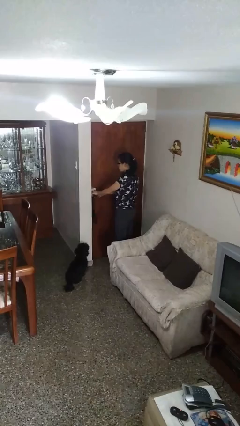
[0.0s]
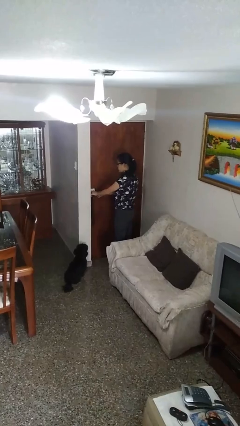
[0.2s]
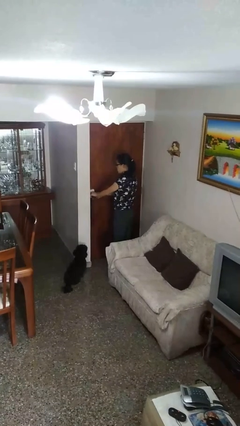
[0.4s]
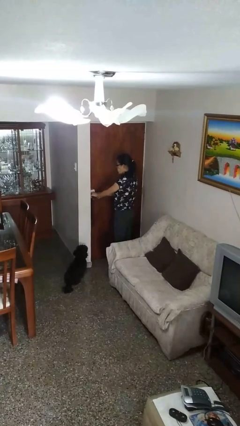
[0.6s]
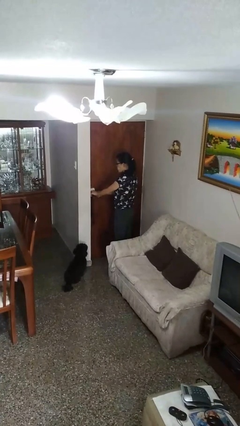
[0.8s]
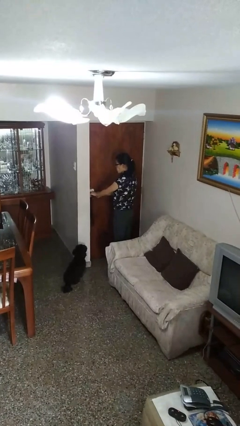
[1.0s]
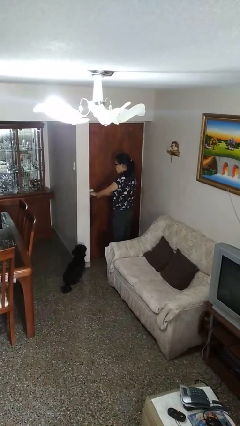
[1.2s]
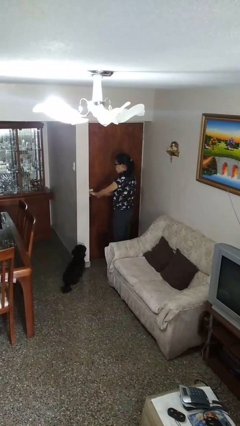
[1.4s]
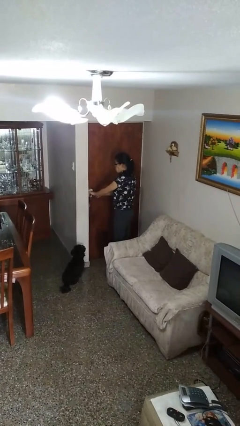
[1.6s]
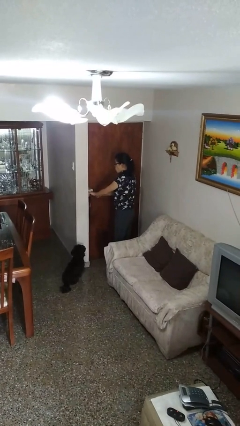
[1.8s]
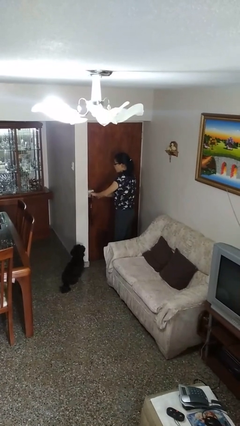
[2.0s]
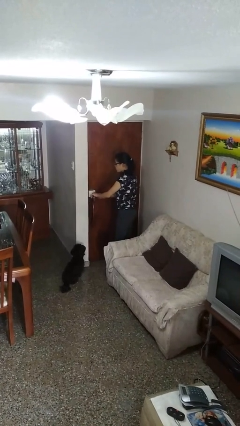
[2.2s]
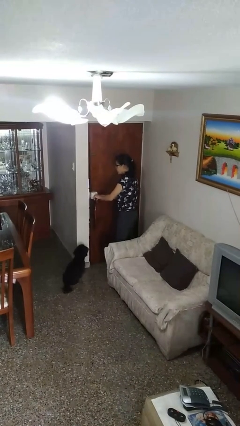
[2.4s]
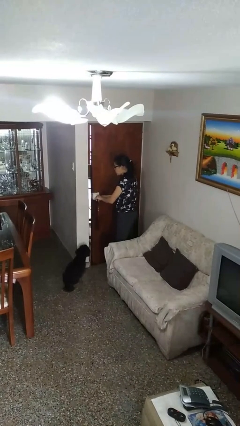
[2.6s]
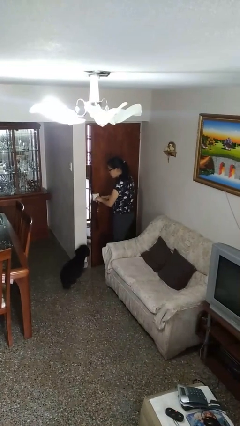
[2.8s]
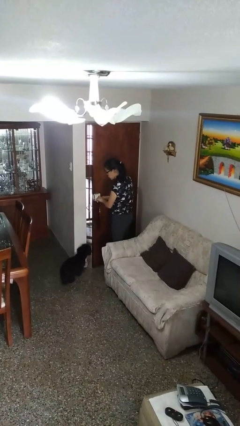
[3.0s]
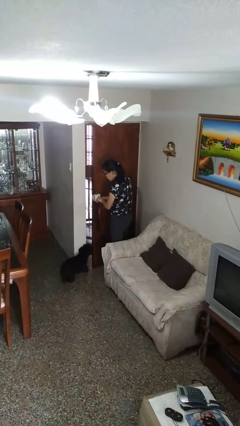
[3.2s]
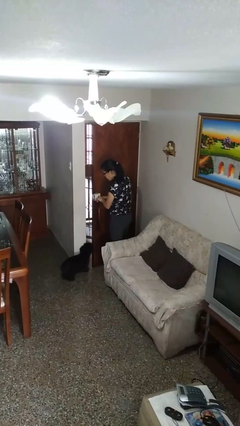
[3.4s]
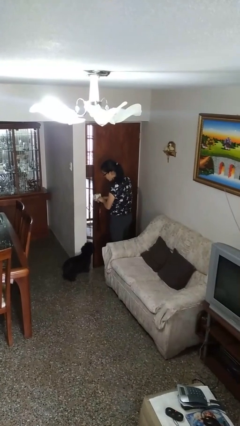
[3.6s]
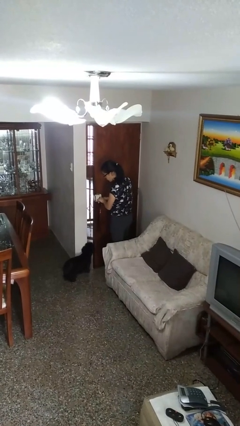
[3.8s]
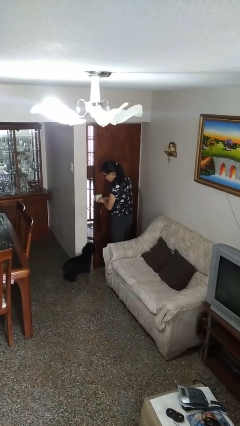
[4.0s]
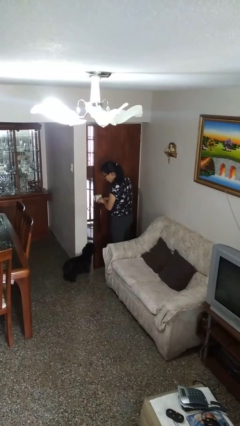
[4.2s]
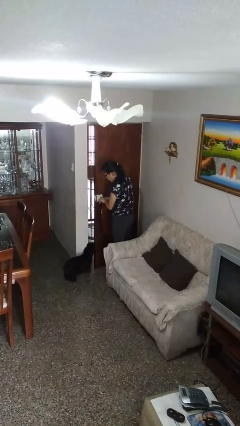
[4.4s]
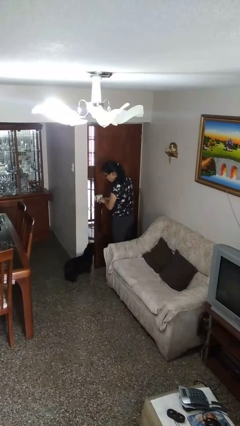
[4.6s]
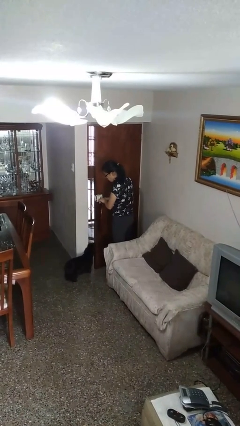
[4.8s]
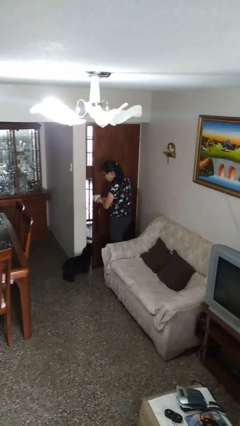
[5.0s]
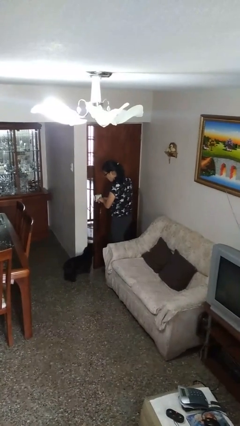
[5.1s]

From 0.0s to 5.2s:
person opens facility door

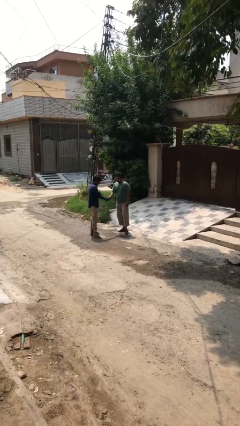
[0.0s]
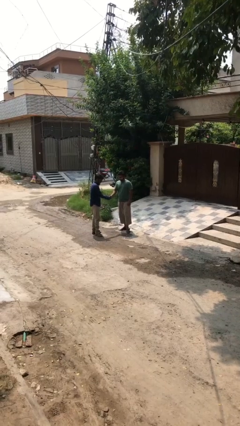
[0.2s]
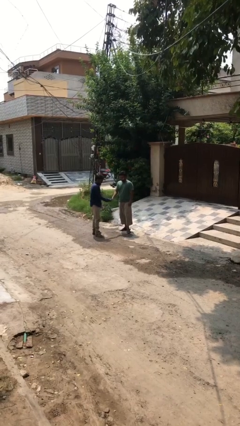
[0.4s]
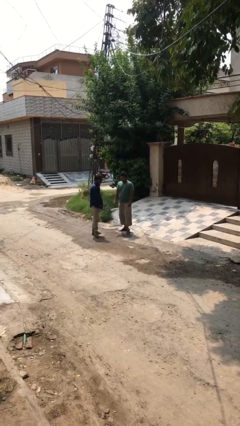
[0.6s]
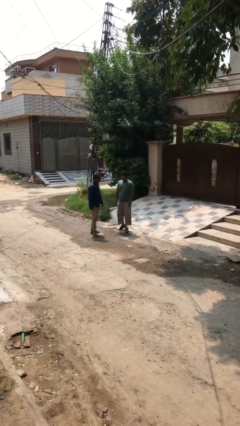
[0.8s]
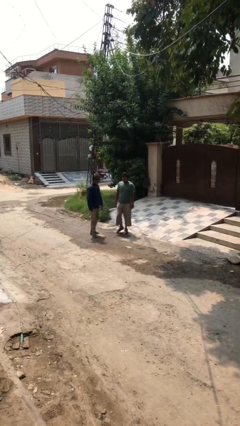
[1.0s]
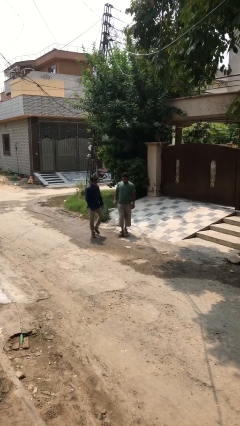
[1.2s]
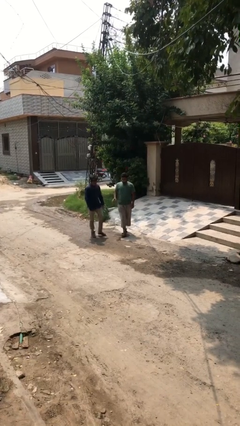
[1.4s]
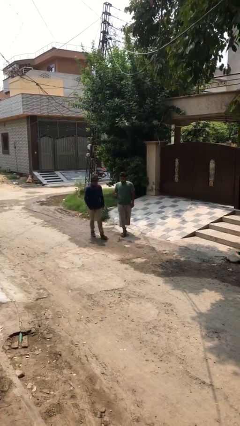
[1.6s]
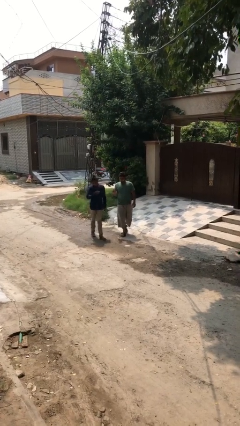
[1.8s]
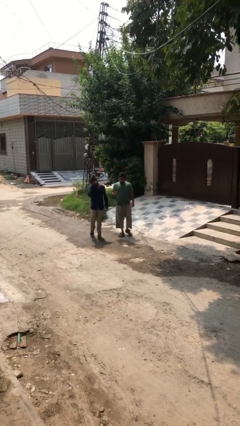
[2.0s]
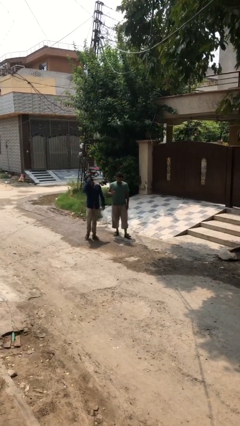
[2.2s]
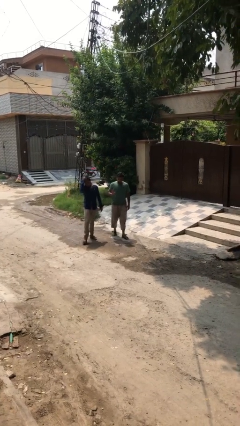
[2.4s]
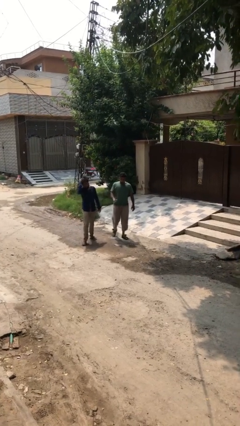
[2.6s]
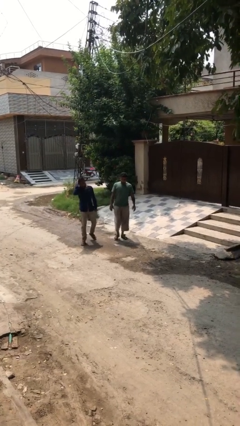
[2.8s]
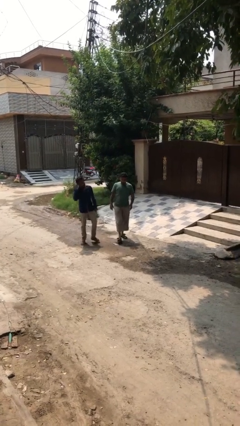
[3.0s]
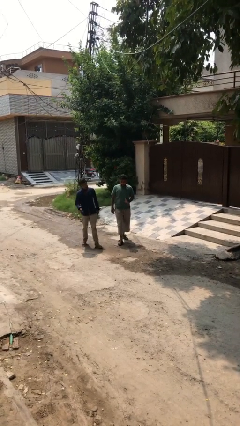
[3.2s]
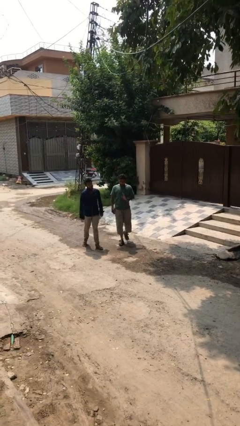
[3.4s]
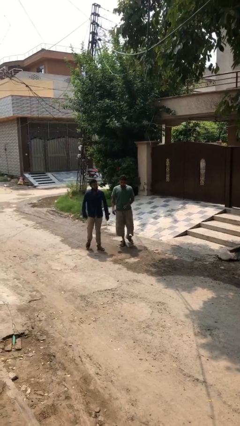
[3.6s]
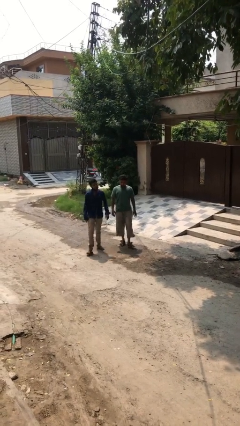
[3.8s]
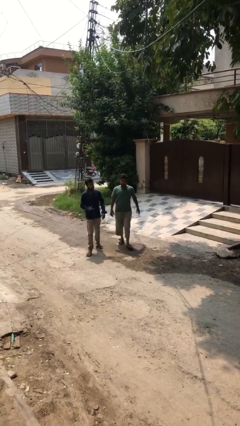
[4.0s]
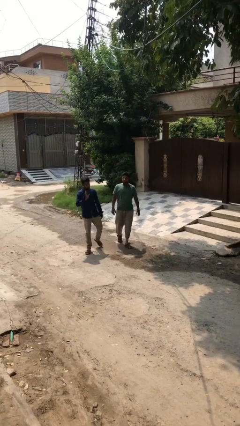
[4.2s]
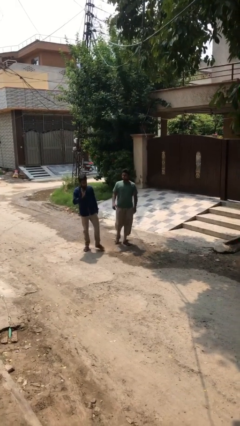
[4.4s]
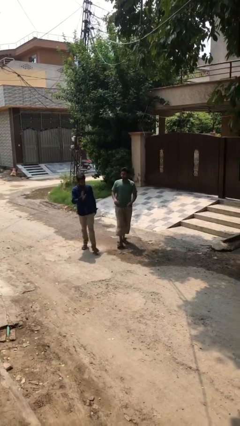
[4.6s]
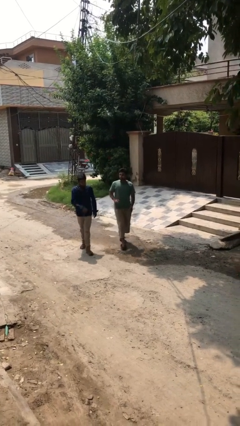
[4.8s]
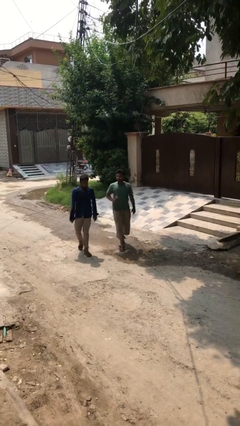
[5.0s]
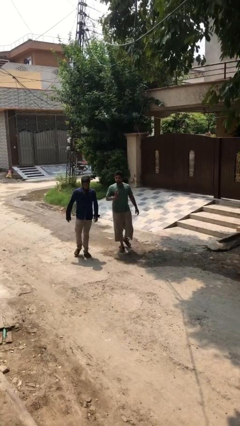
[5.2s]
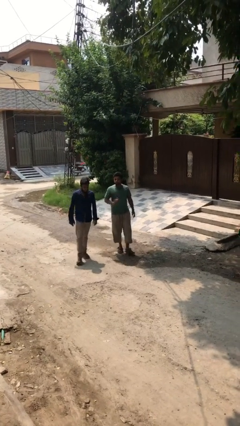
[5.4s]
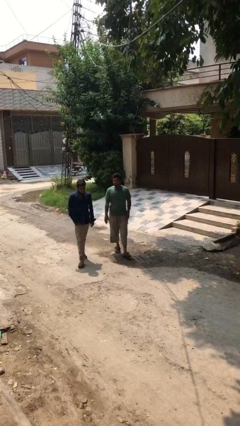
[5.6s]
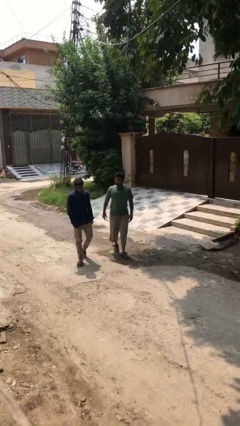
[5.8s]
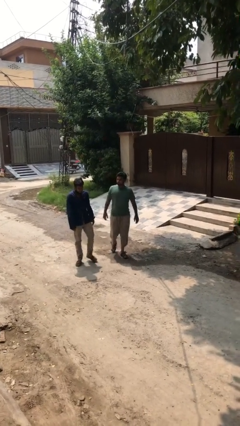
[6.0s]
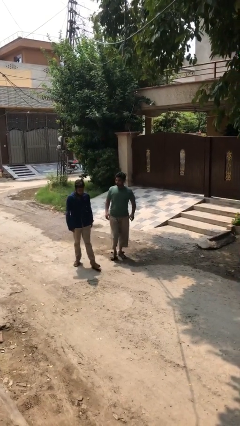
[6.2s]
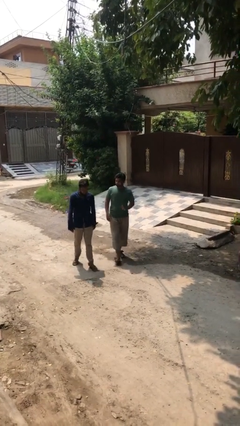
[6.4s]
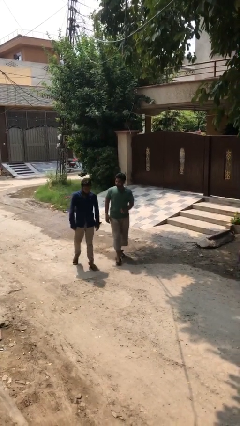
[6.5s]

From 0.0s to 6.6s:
person talks to person

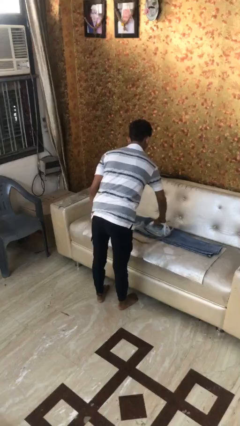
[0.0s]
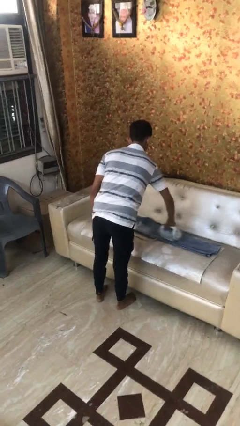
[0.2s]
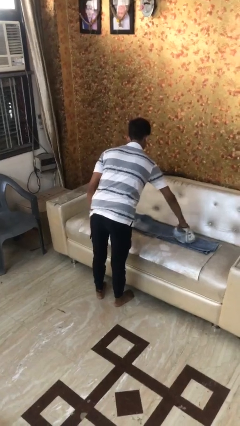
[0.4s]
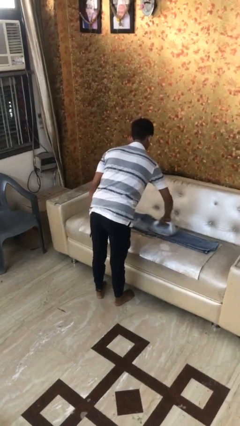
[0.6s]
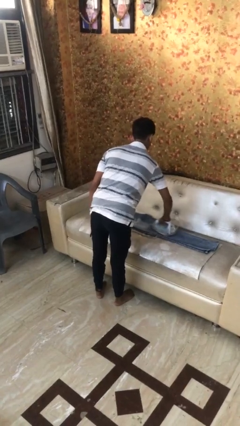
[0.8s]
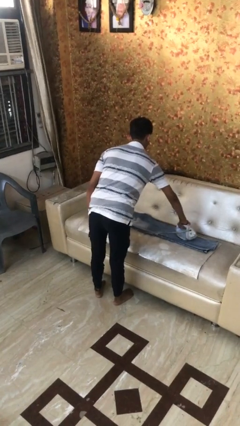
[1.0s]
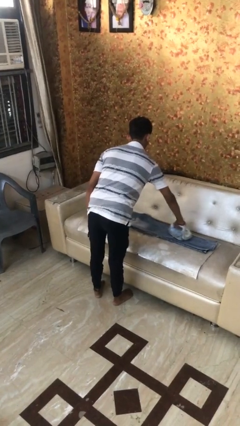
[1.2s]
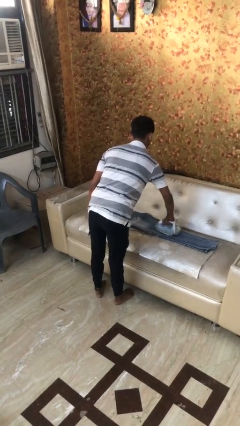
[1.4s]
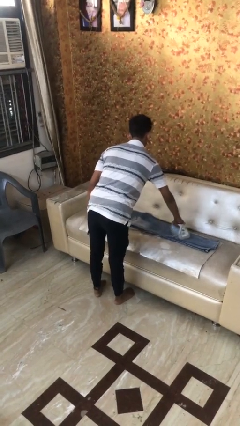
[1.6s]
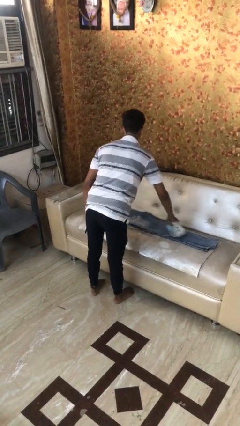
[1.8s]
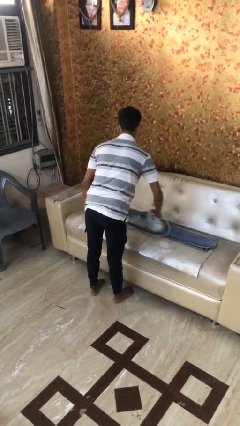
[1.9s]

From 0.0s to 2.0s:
person irons clothes

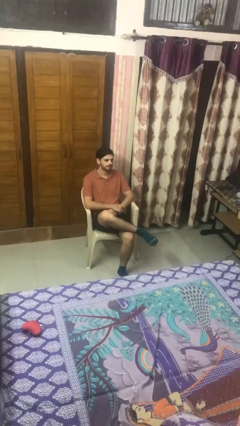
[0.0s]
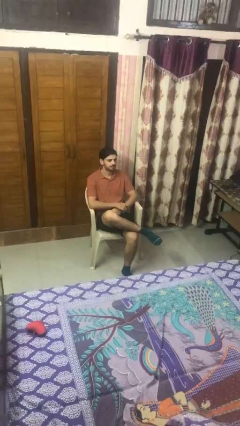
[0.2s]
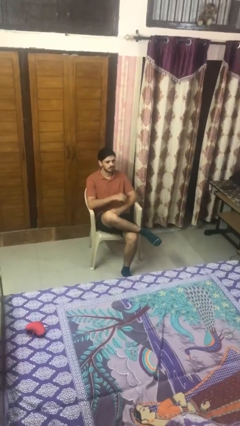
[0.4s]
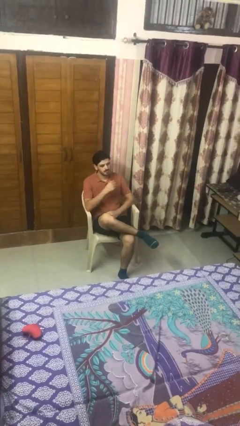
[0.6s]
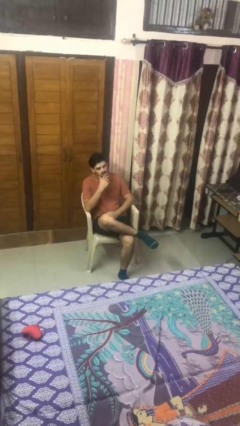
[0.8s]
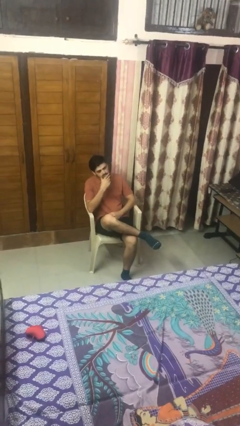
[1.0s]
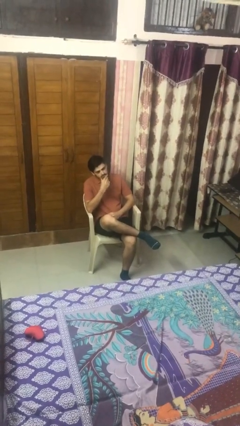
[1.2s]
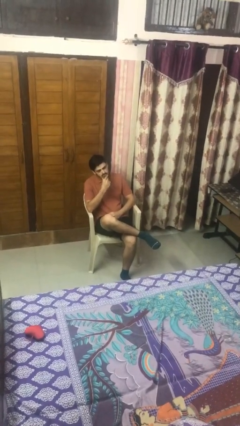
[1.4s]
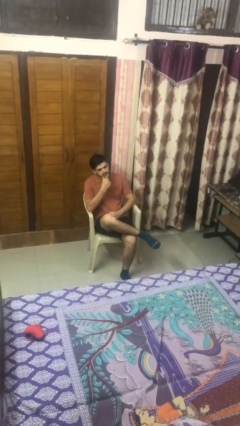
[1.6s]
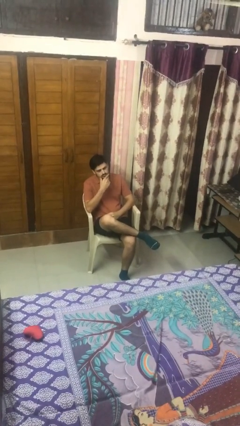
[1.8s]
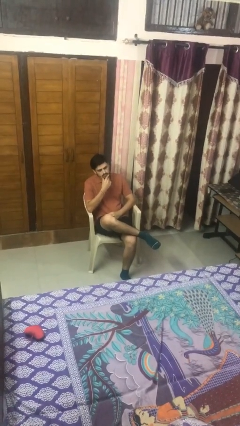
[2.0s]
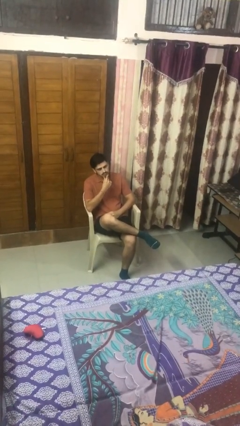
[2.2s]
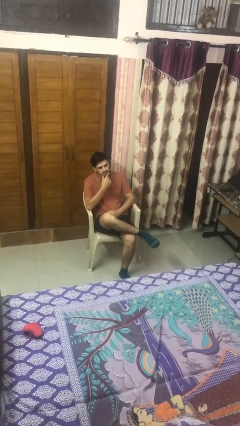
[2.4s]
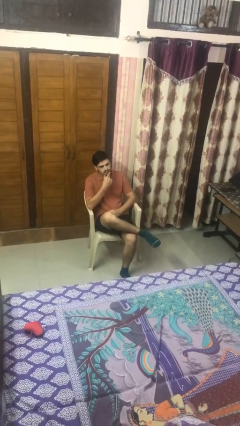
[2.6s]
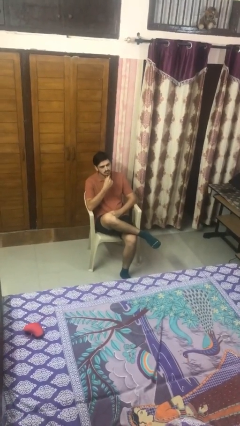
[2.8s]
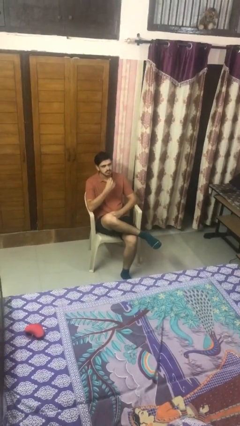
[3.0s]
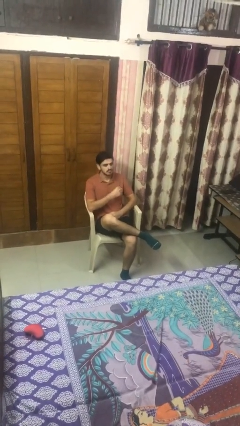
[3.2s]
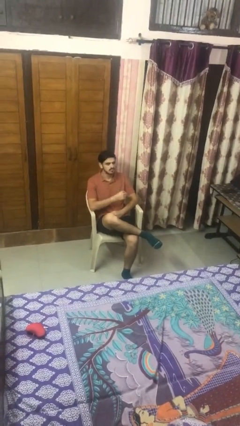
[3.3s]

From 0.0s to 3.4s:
person strokes chin

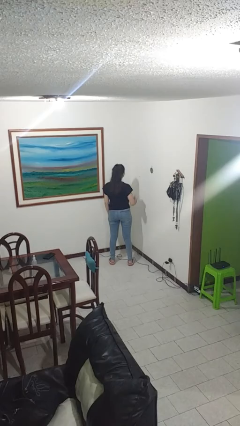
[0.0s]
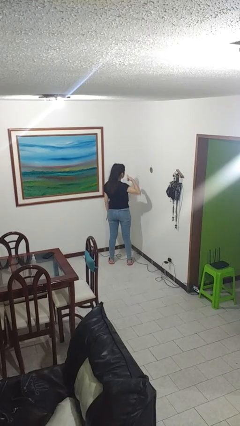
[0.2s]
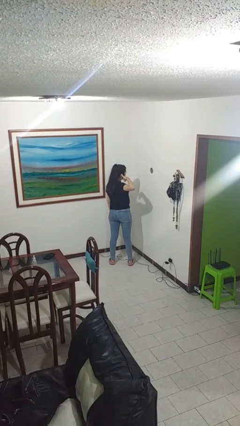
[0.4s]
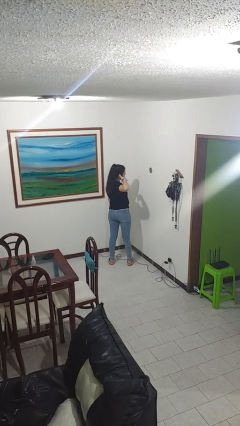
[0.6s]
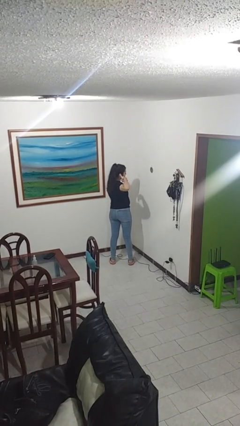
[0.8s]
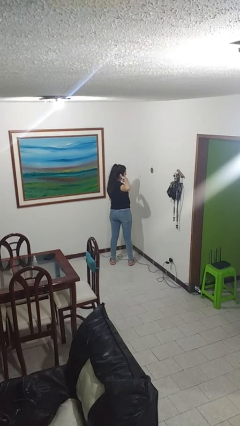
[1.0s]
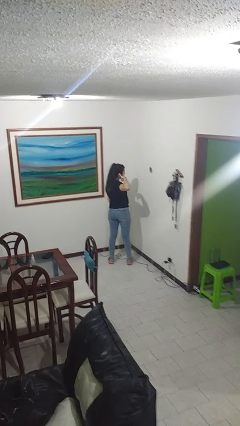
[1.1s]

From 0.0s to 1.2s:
person gestures call me
